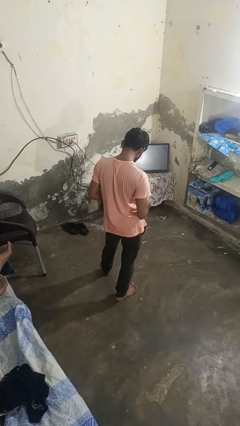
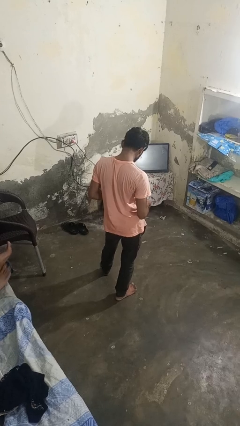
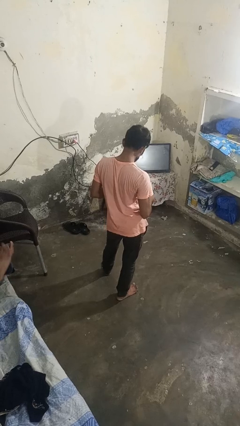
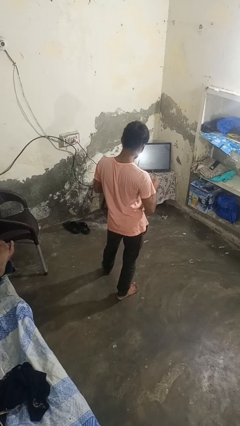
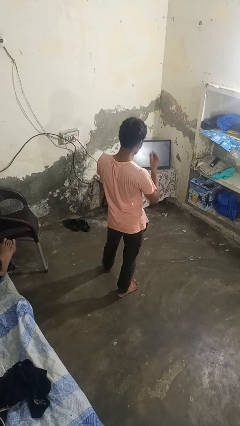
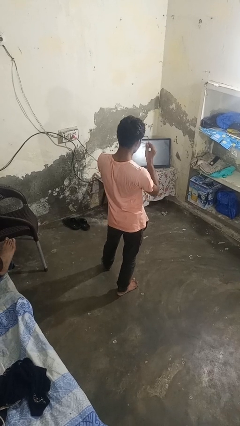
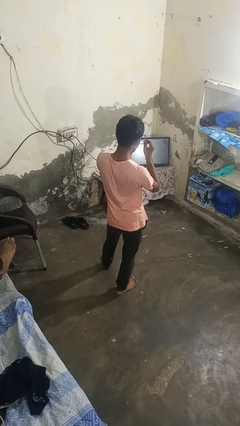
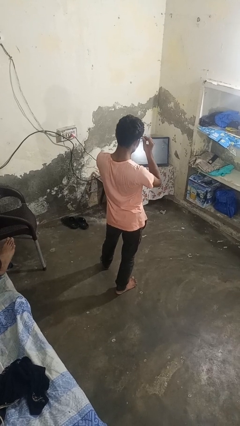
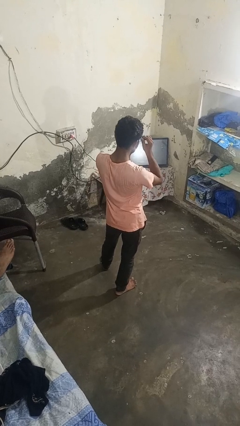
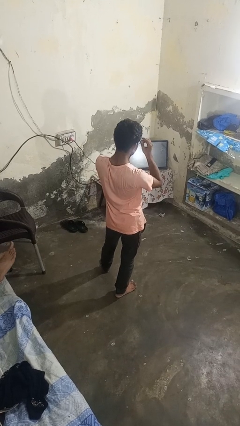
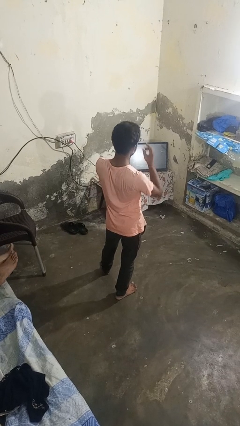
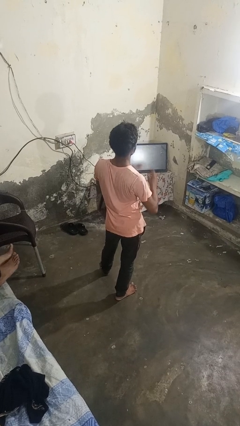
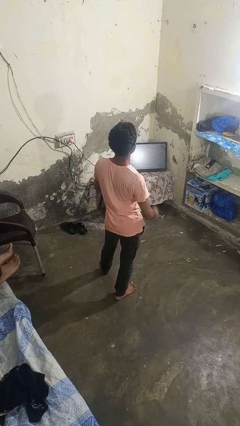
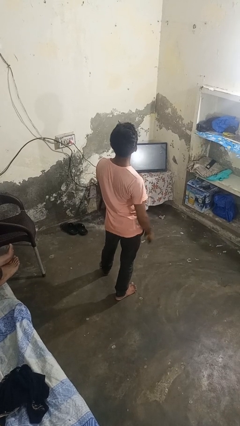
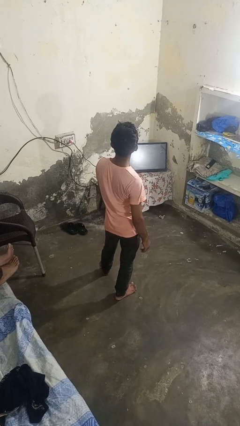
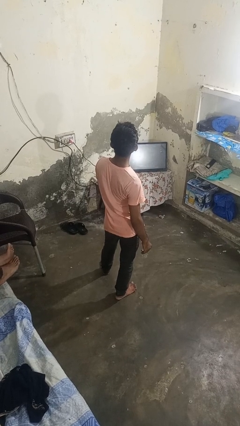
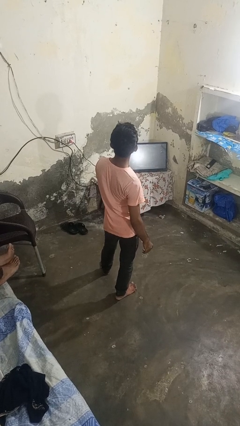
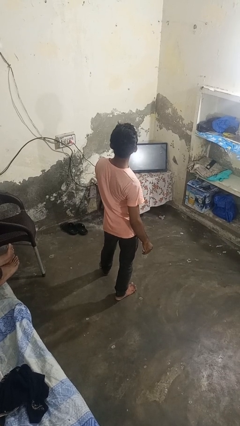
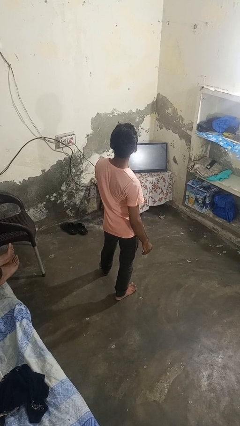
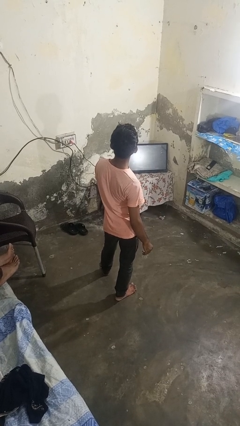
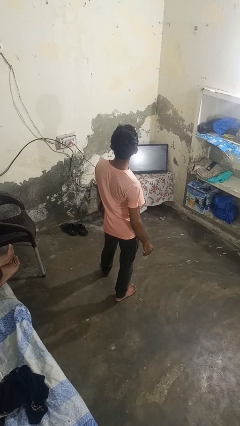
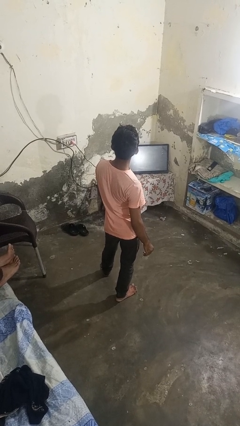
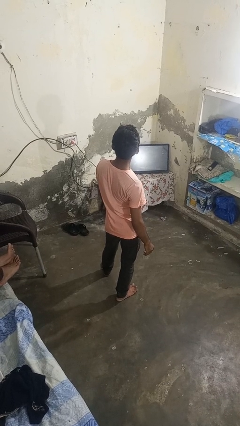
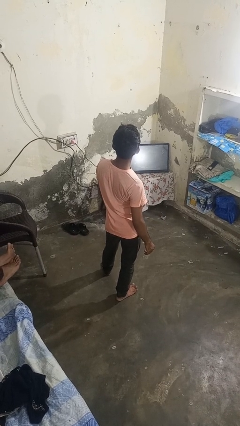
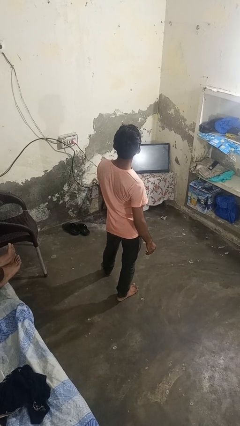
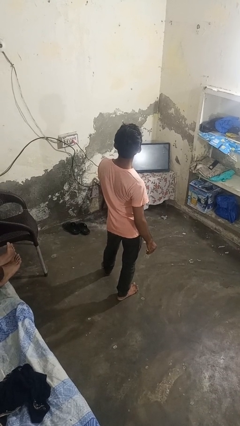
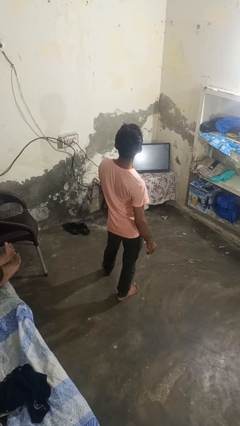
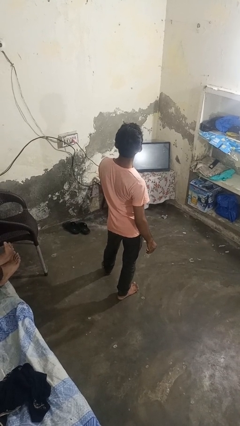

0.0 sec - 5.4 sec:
person puts on glasses

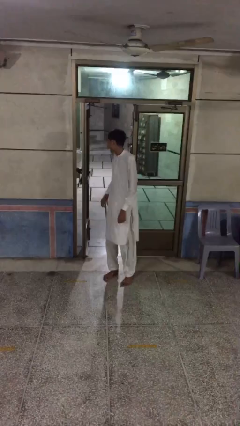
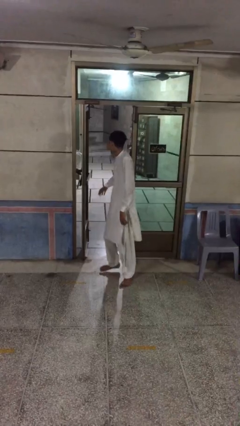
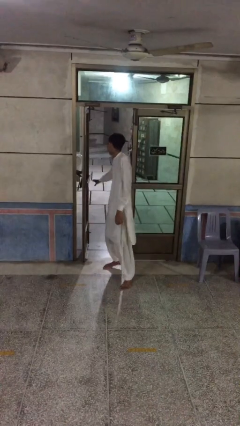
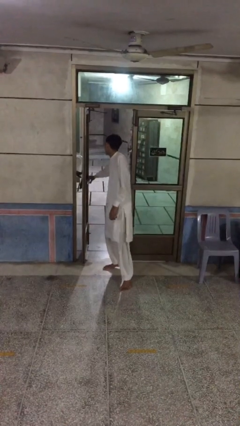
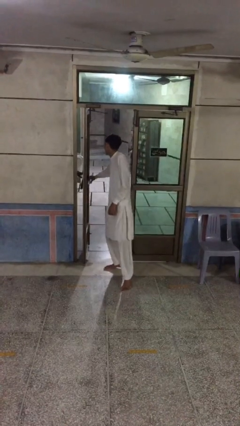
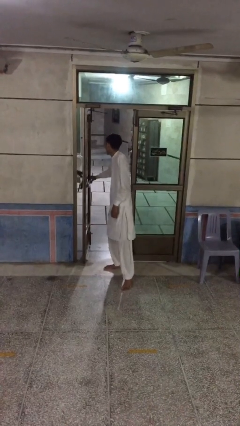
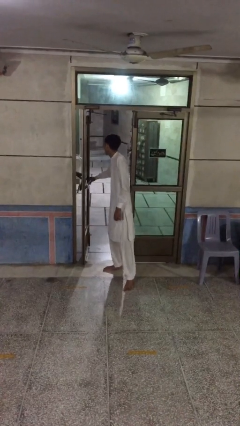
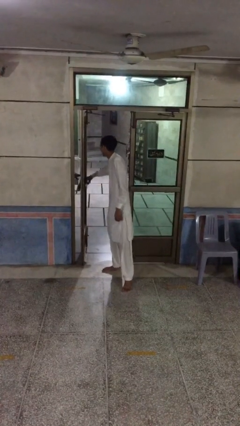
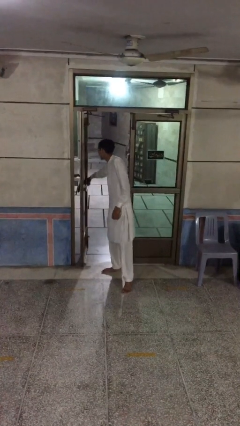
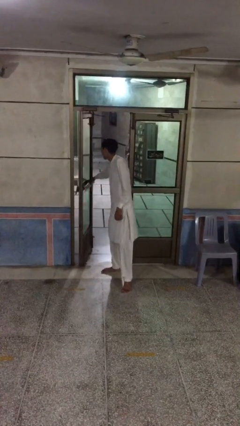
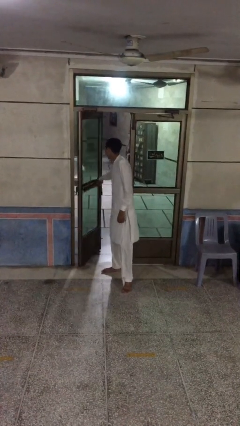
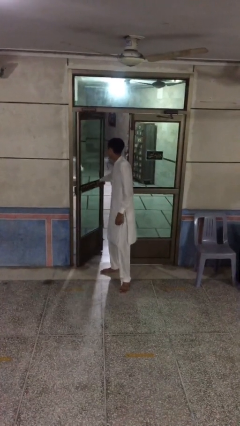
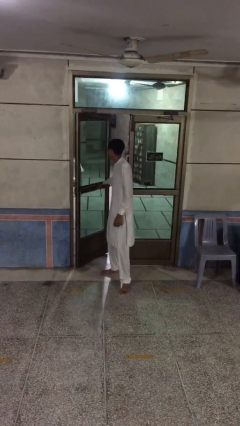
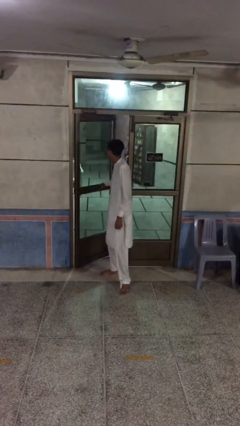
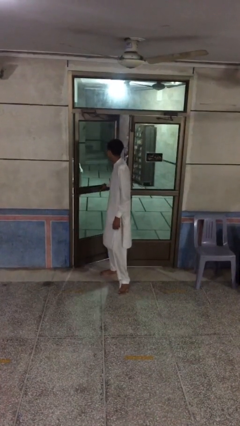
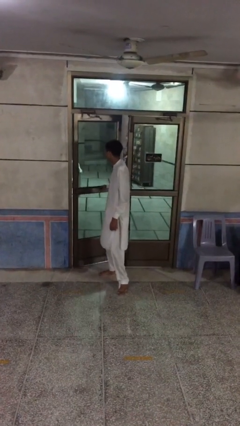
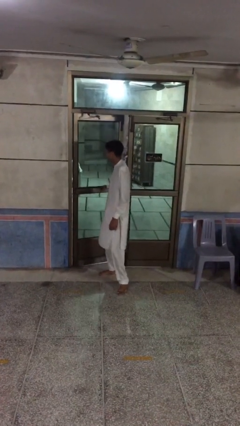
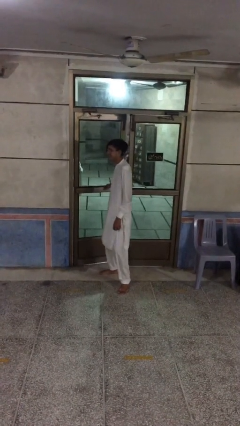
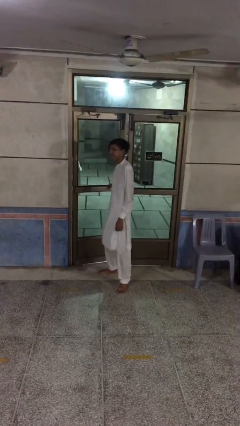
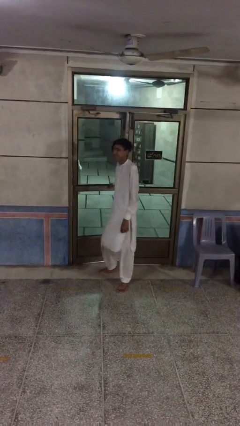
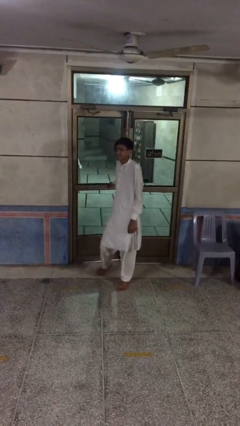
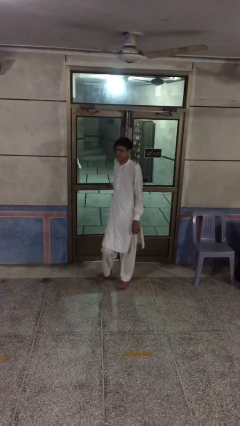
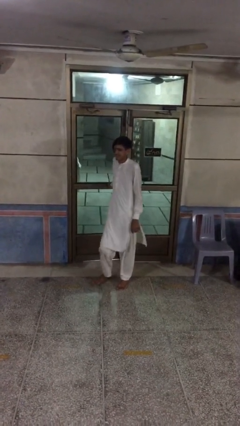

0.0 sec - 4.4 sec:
person closes facility door

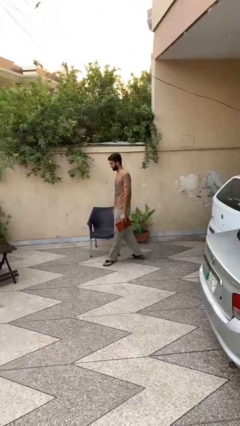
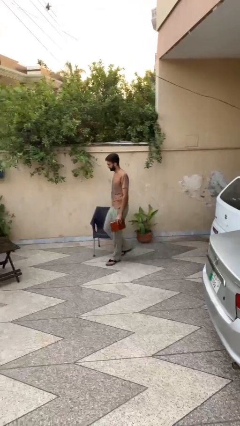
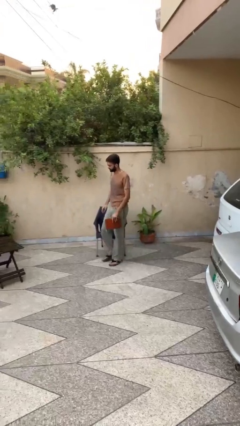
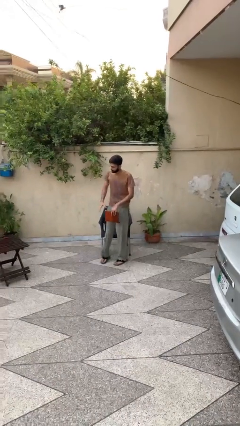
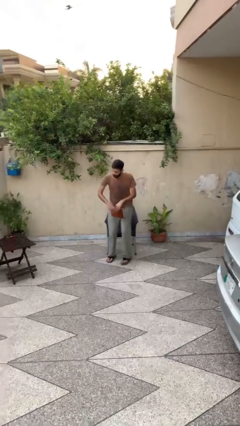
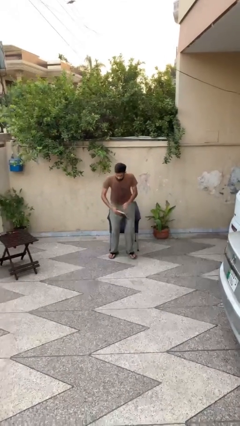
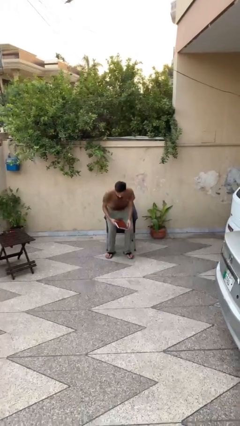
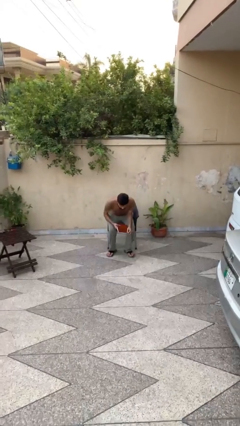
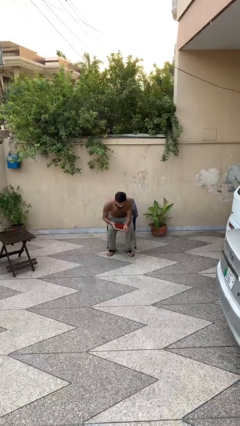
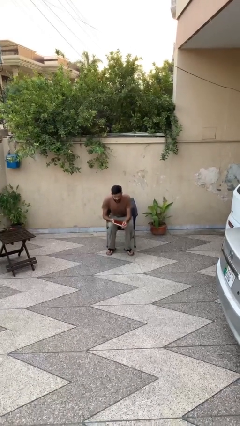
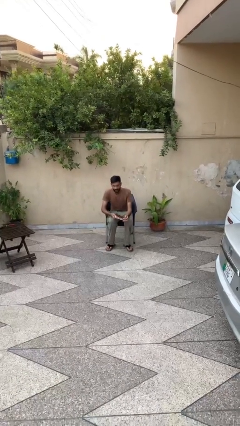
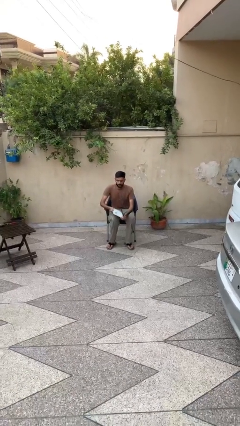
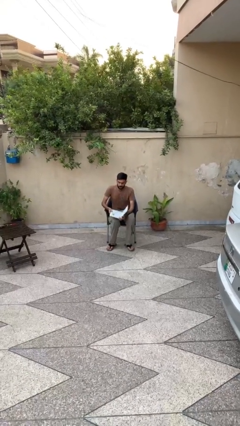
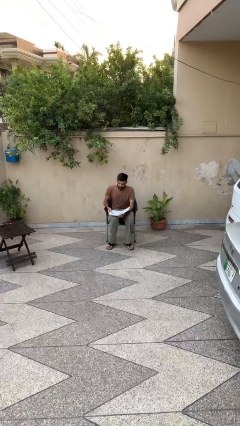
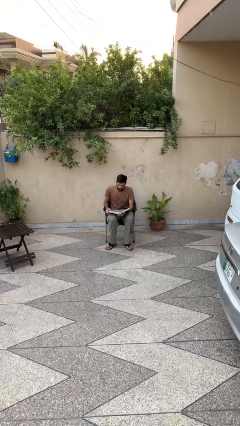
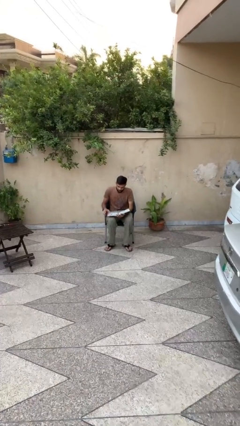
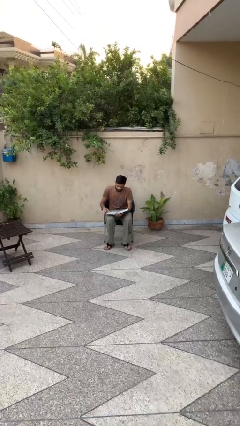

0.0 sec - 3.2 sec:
person sits down

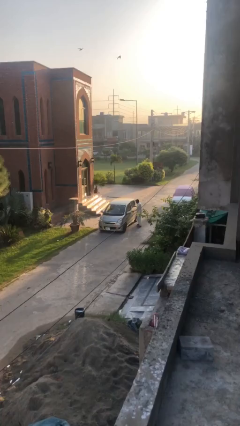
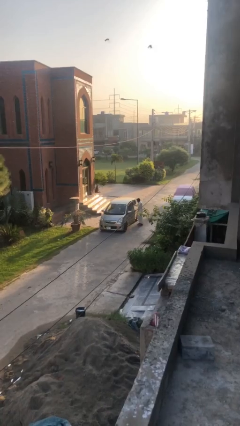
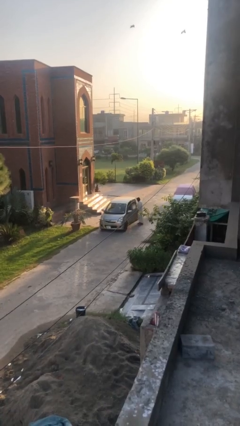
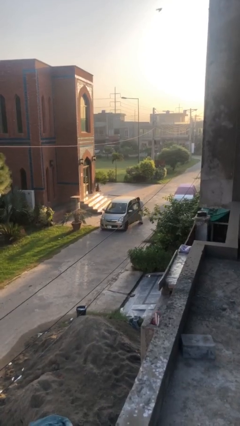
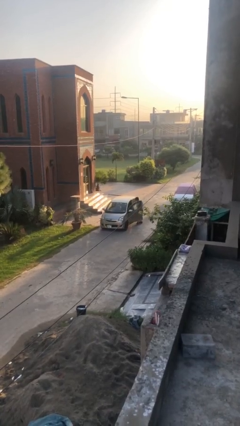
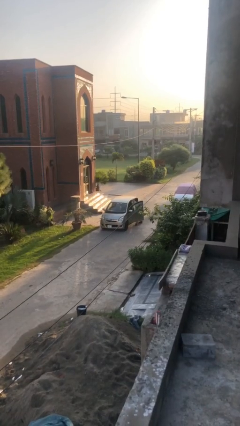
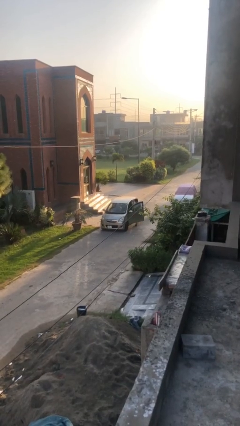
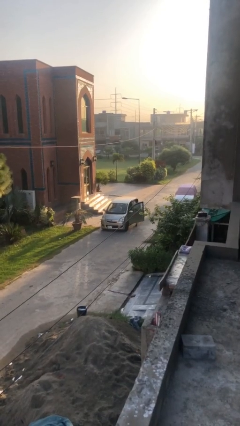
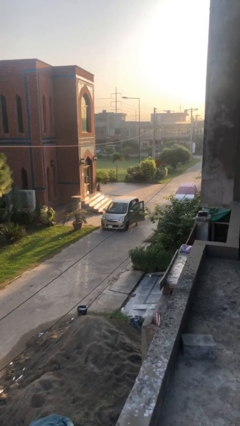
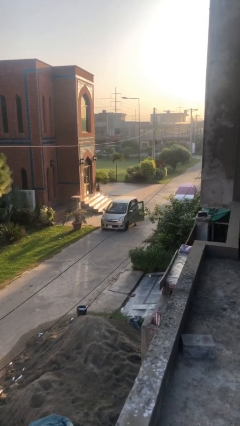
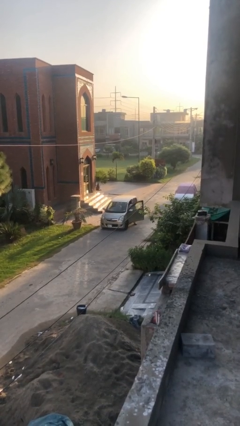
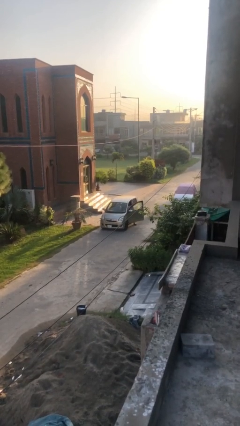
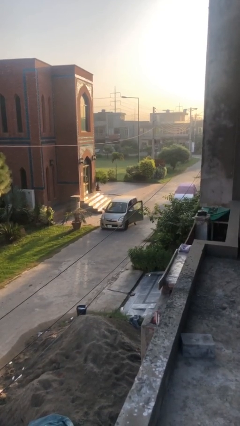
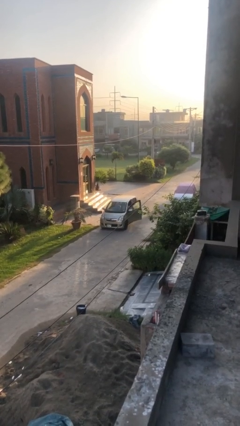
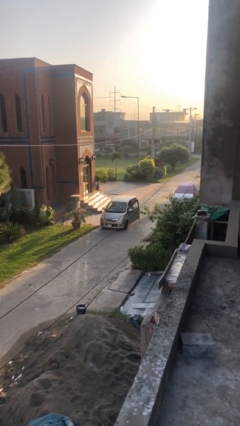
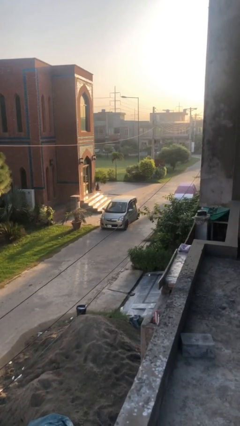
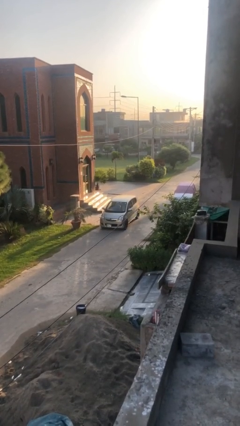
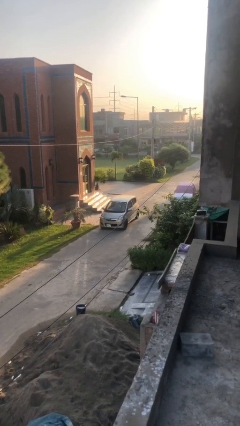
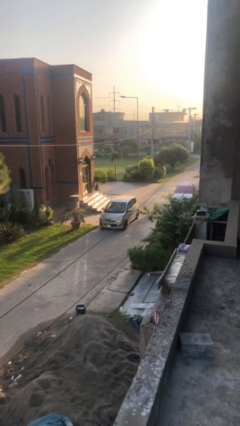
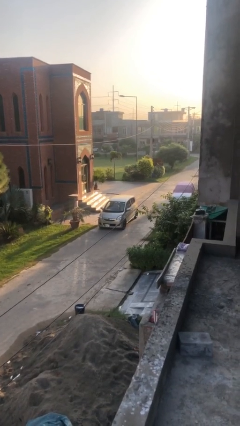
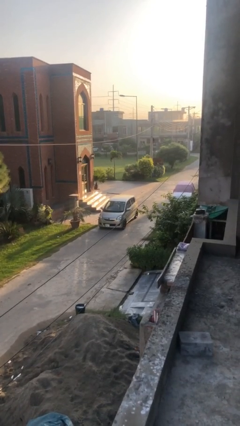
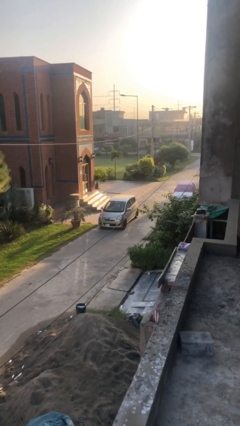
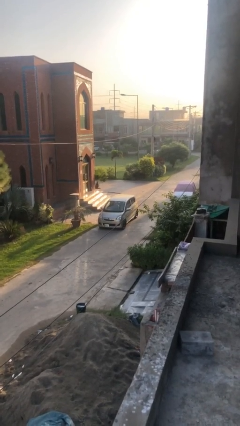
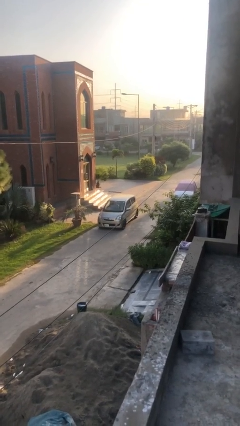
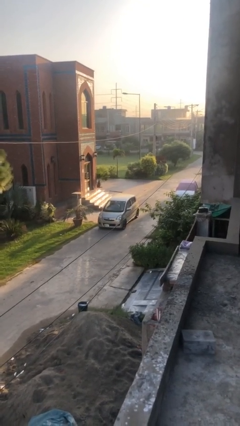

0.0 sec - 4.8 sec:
car picks up person
